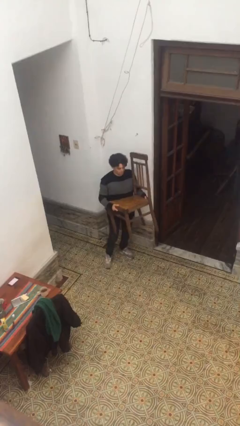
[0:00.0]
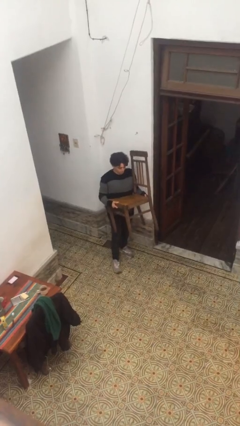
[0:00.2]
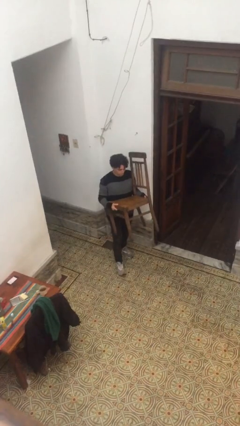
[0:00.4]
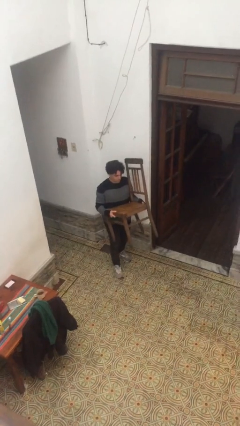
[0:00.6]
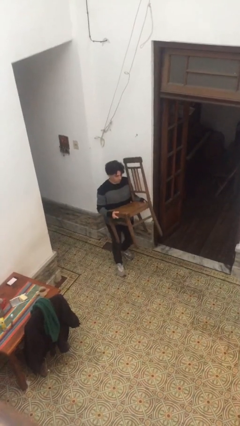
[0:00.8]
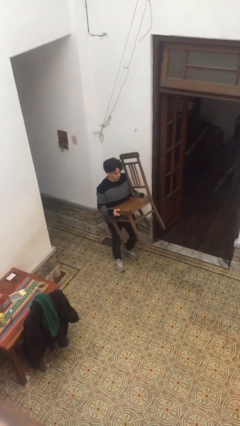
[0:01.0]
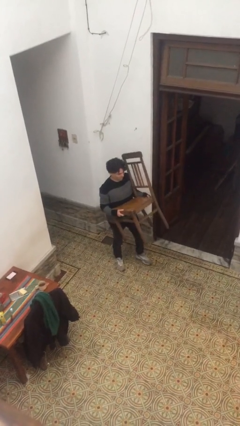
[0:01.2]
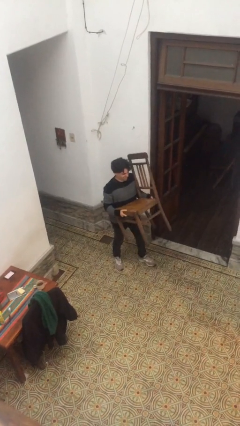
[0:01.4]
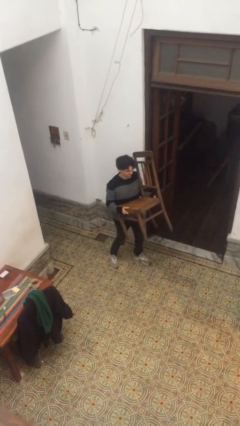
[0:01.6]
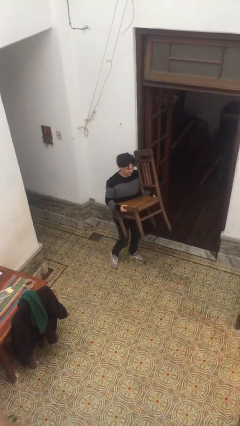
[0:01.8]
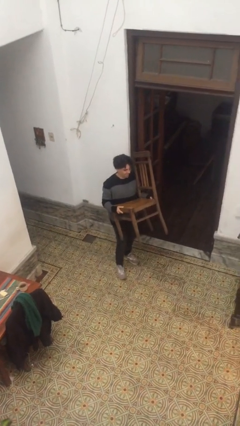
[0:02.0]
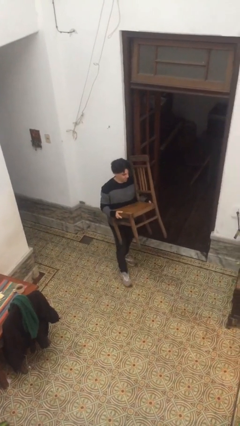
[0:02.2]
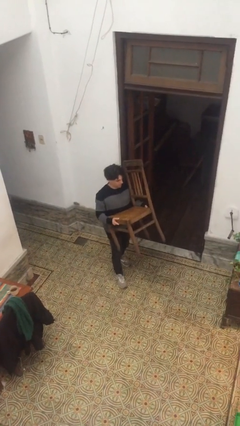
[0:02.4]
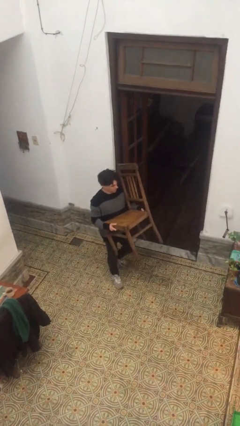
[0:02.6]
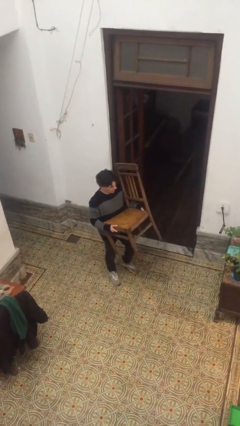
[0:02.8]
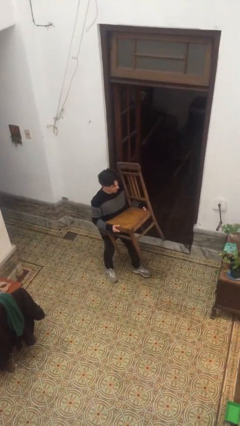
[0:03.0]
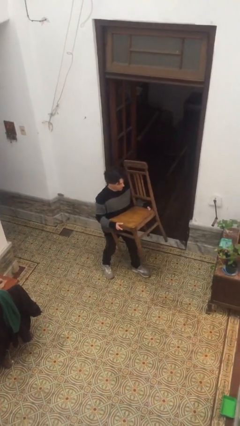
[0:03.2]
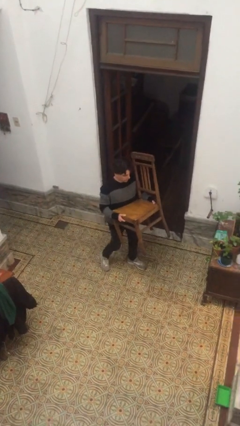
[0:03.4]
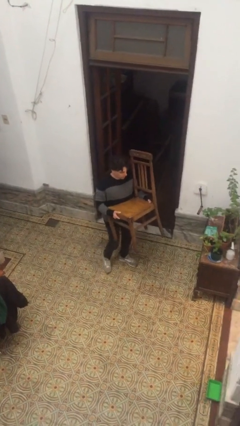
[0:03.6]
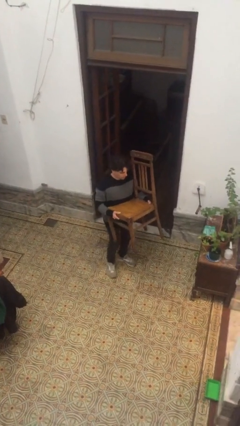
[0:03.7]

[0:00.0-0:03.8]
person carries heavy object

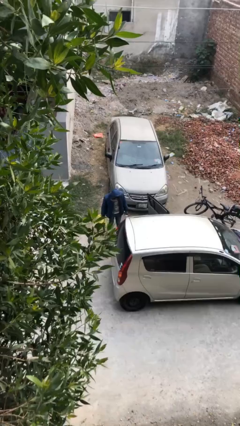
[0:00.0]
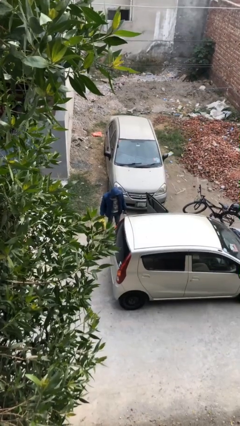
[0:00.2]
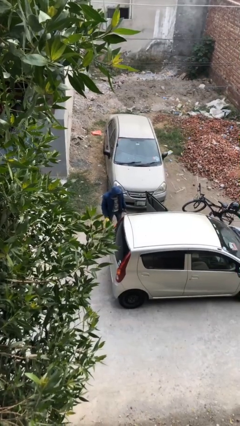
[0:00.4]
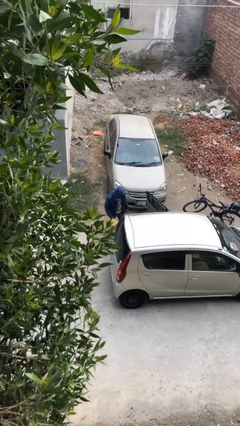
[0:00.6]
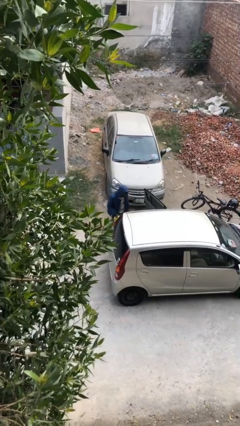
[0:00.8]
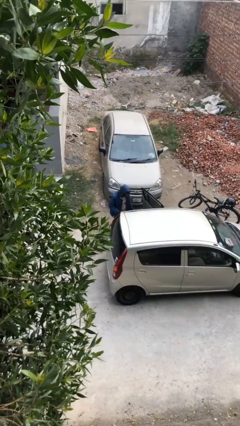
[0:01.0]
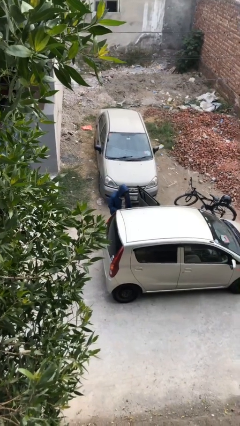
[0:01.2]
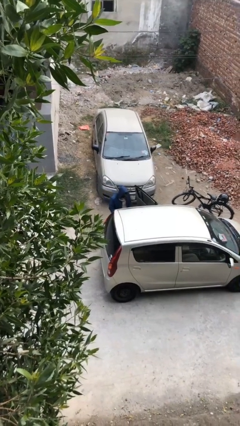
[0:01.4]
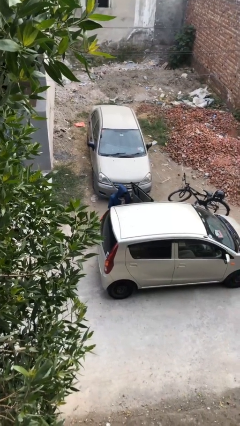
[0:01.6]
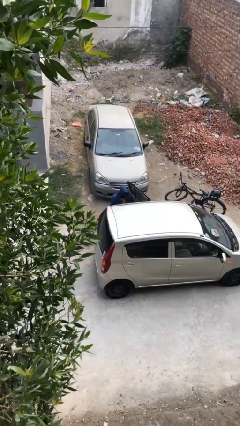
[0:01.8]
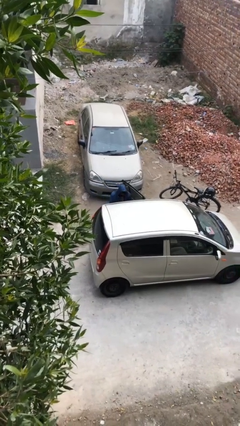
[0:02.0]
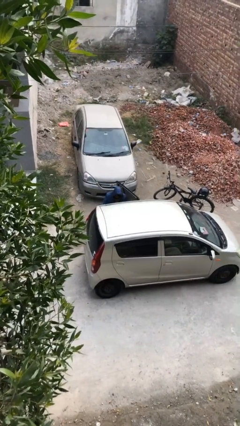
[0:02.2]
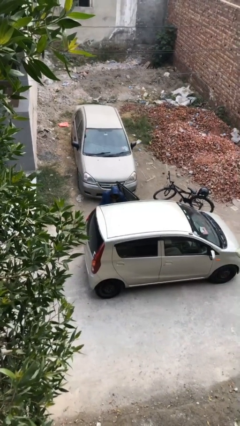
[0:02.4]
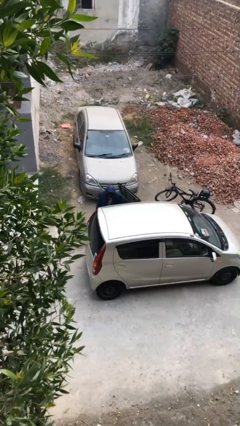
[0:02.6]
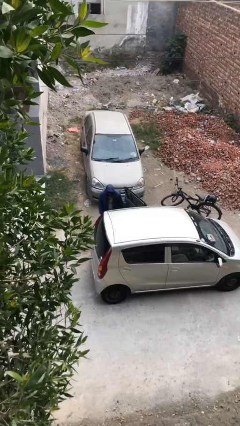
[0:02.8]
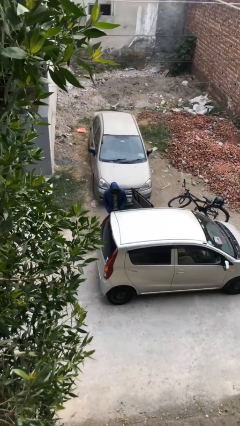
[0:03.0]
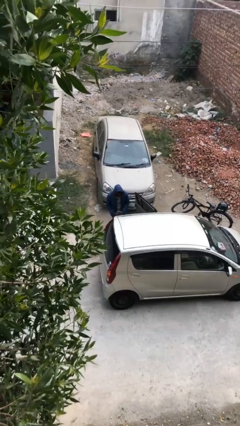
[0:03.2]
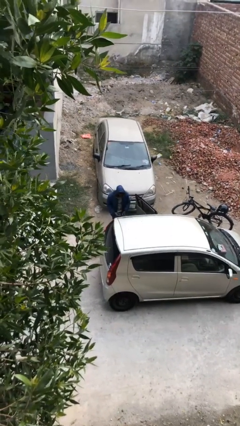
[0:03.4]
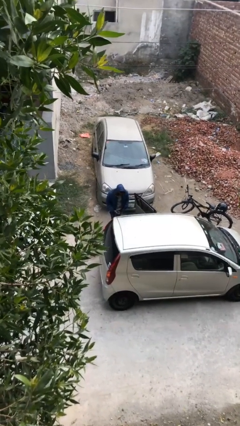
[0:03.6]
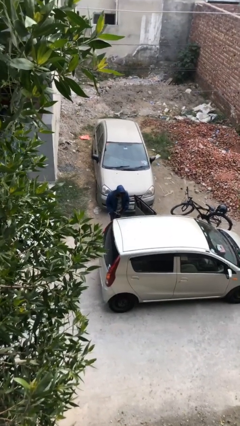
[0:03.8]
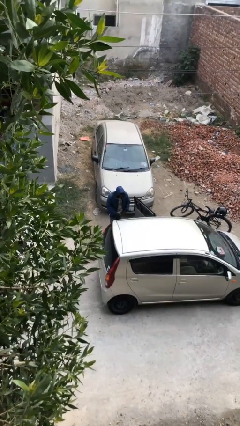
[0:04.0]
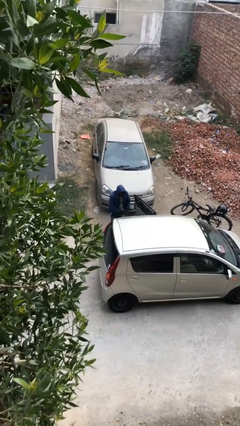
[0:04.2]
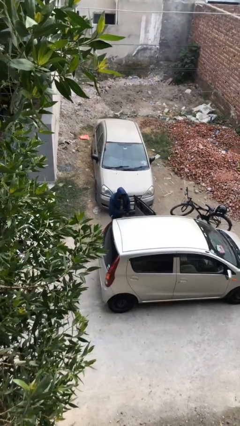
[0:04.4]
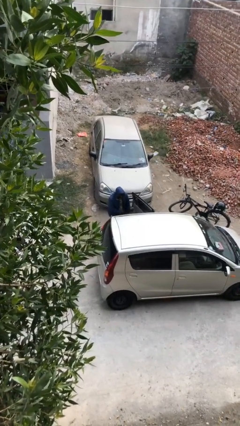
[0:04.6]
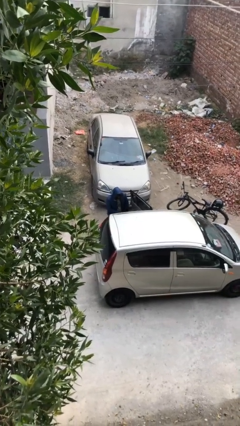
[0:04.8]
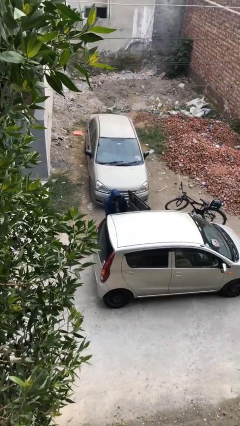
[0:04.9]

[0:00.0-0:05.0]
person loads car

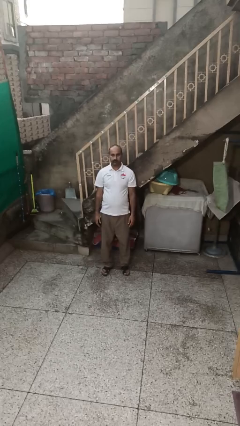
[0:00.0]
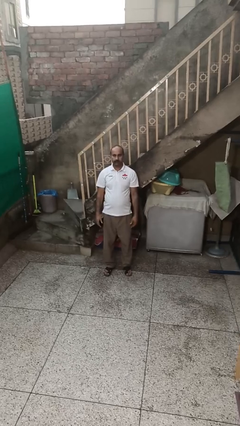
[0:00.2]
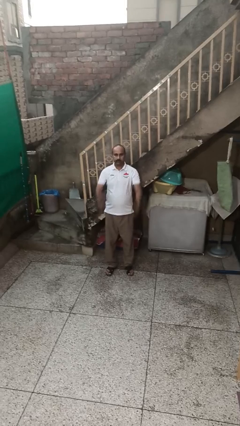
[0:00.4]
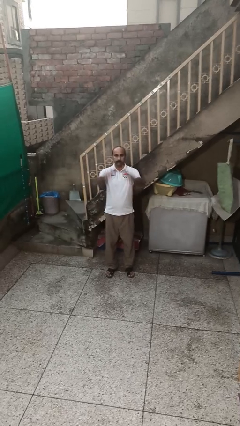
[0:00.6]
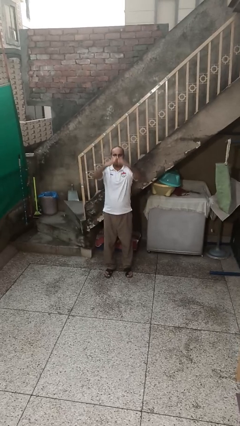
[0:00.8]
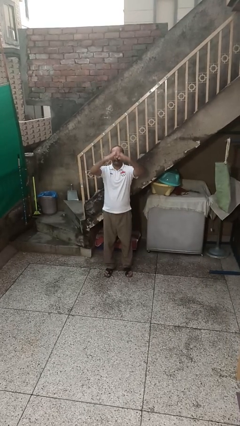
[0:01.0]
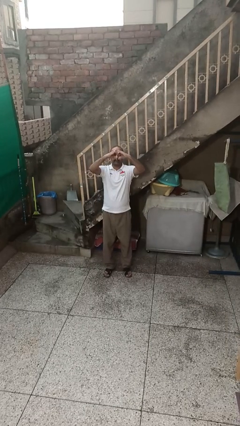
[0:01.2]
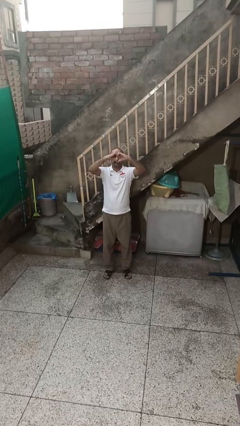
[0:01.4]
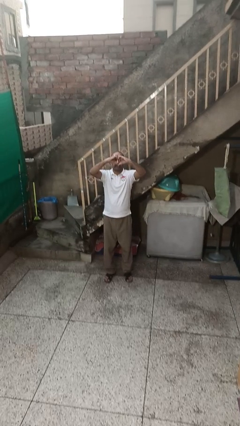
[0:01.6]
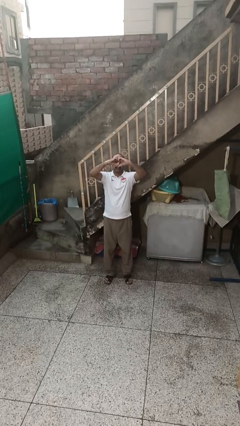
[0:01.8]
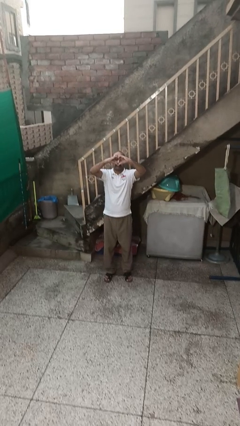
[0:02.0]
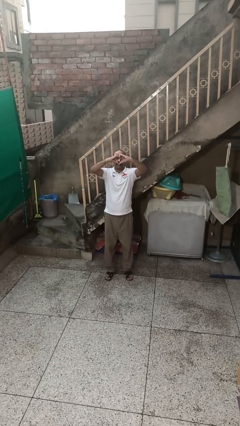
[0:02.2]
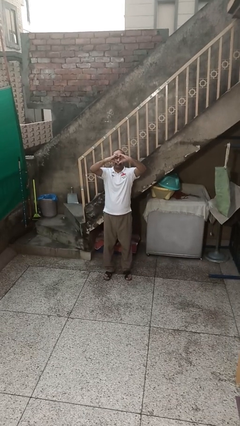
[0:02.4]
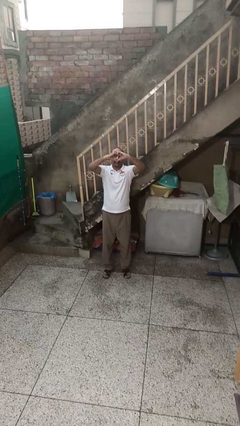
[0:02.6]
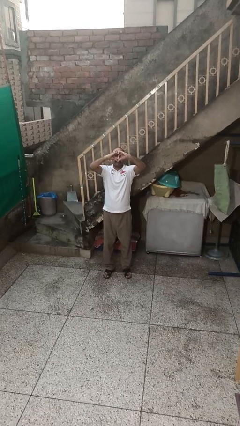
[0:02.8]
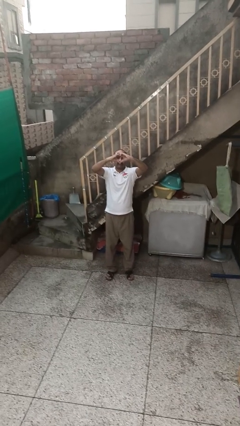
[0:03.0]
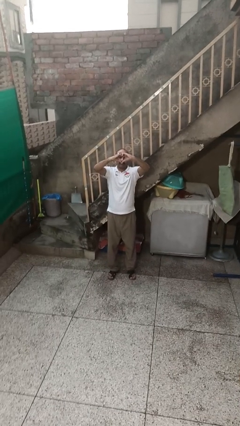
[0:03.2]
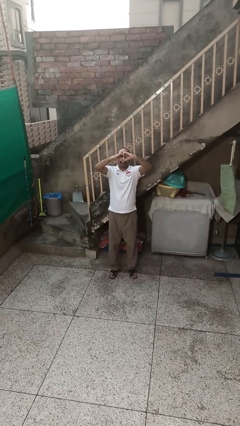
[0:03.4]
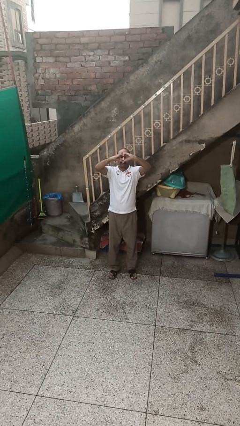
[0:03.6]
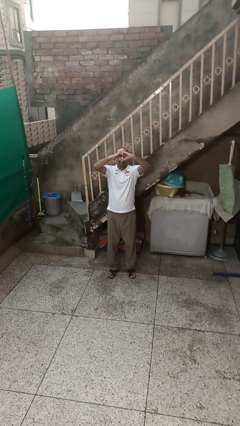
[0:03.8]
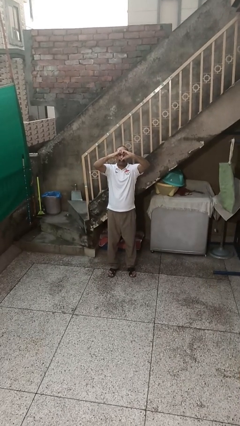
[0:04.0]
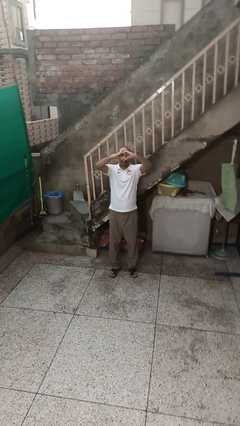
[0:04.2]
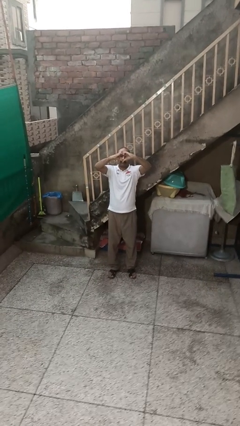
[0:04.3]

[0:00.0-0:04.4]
person gestures heart

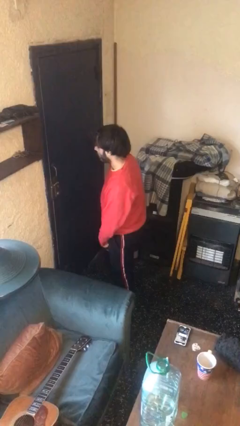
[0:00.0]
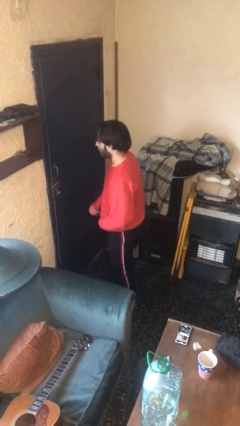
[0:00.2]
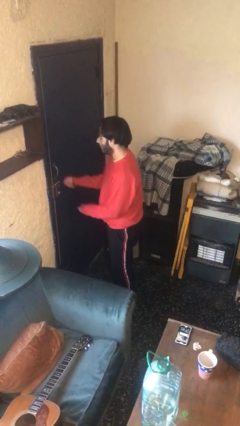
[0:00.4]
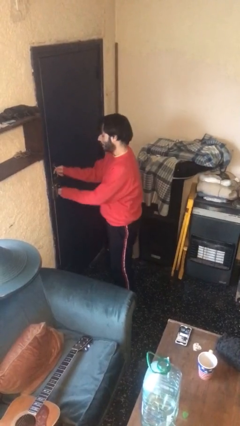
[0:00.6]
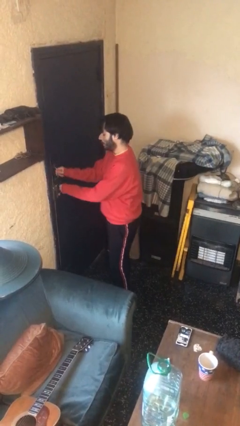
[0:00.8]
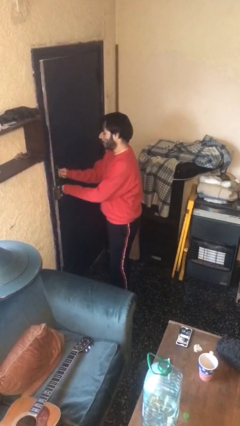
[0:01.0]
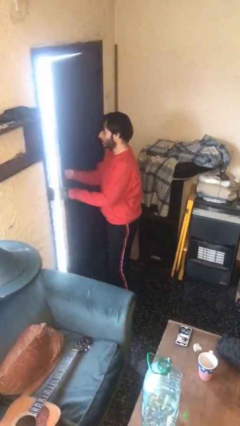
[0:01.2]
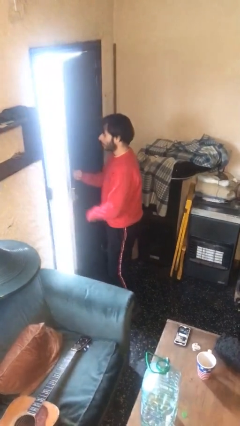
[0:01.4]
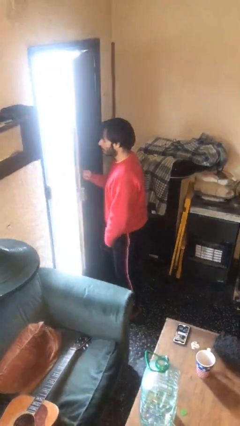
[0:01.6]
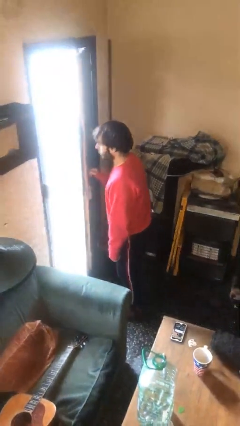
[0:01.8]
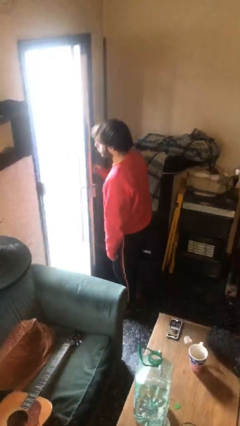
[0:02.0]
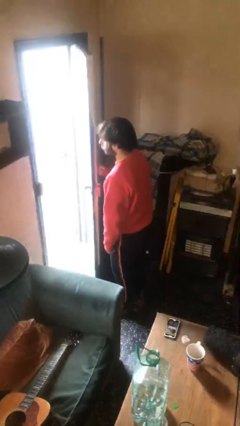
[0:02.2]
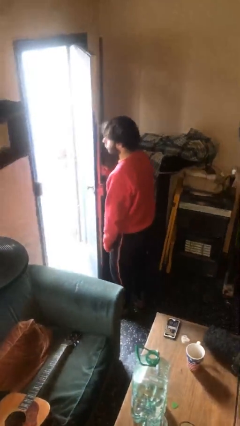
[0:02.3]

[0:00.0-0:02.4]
person opens facility door

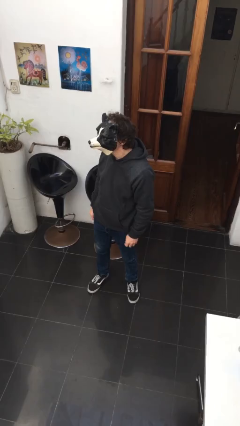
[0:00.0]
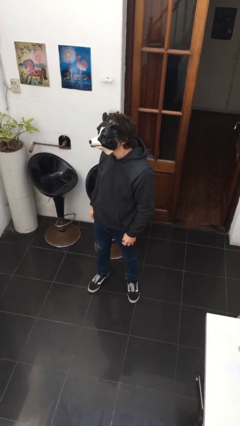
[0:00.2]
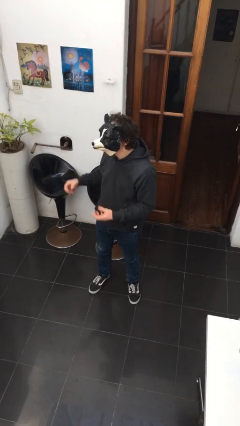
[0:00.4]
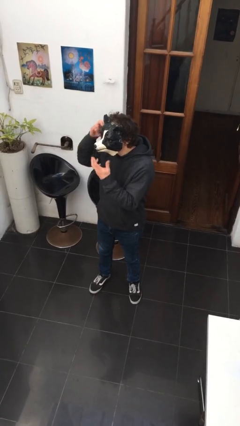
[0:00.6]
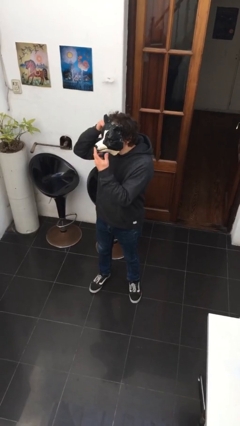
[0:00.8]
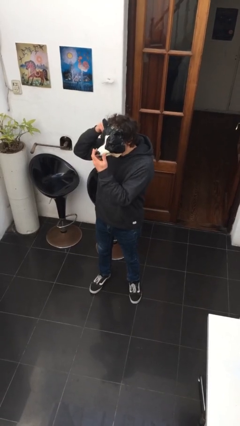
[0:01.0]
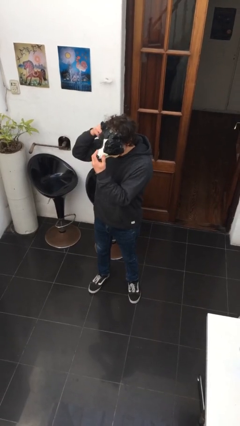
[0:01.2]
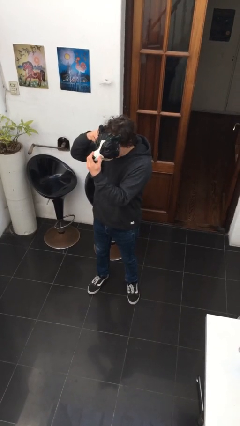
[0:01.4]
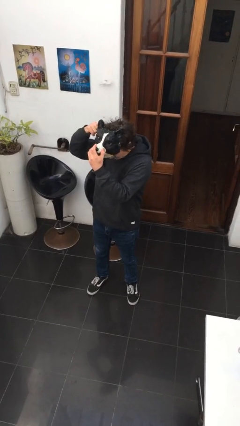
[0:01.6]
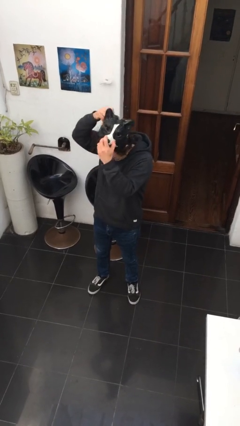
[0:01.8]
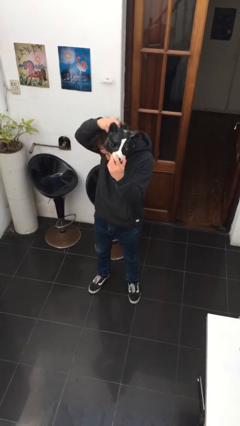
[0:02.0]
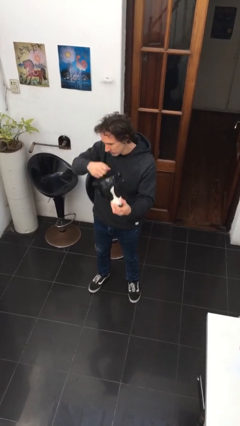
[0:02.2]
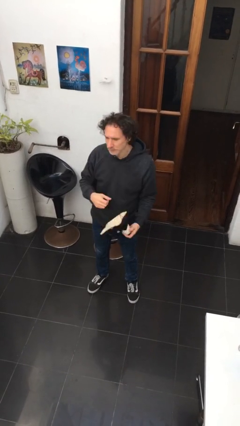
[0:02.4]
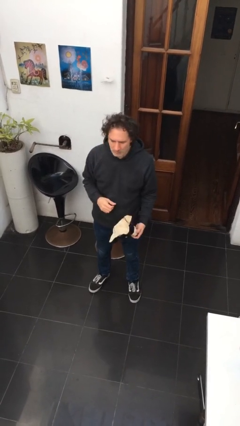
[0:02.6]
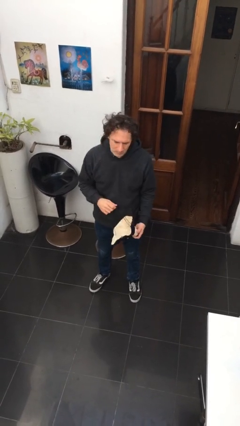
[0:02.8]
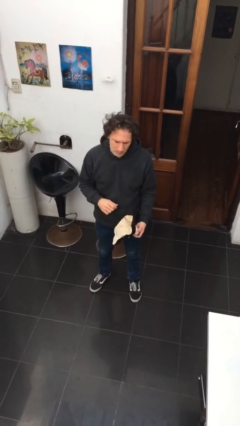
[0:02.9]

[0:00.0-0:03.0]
person takes off facemask
